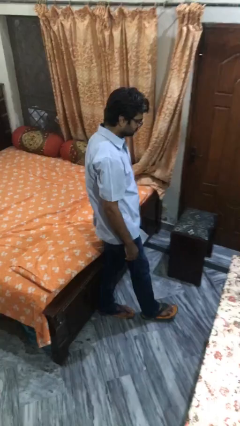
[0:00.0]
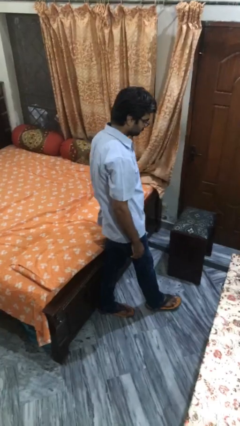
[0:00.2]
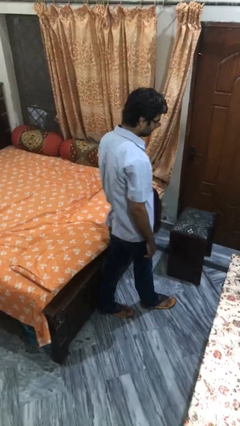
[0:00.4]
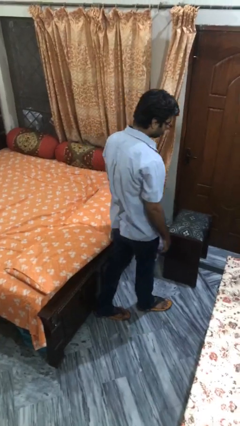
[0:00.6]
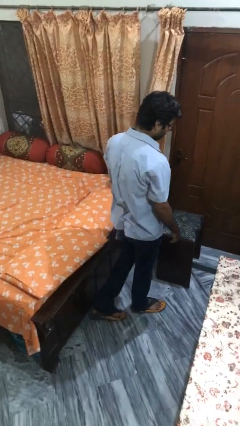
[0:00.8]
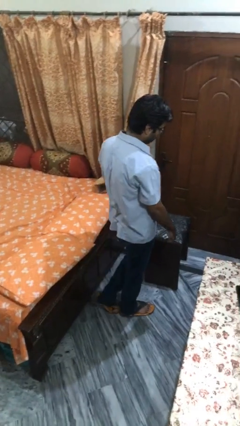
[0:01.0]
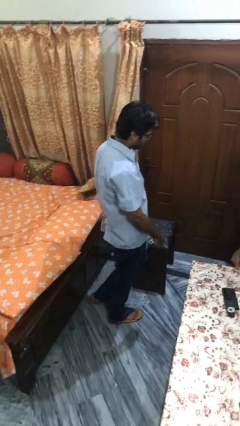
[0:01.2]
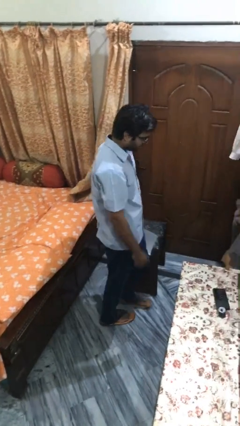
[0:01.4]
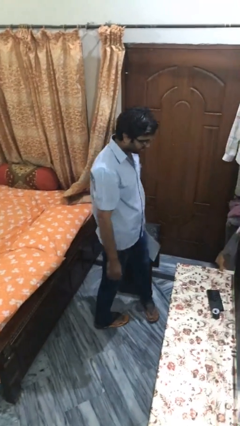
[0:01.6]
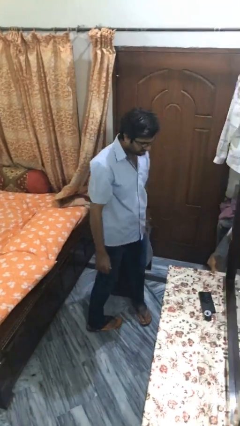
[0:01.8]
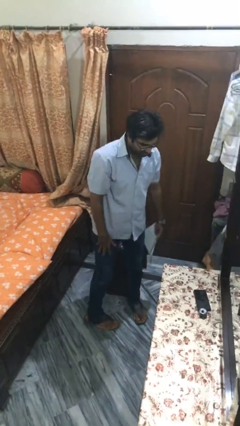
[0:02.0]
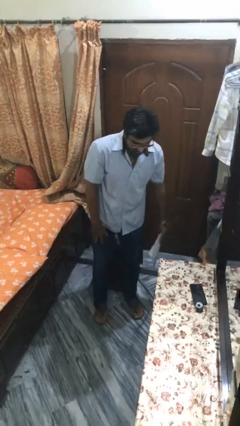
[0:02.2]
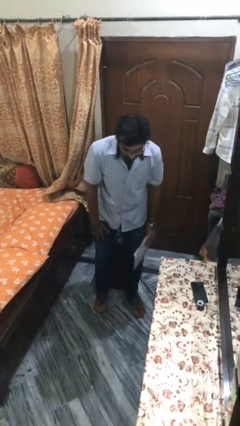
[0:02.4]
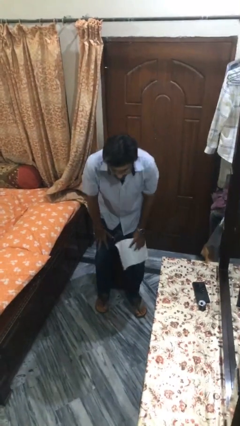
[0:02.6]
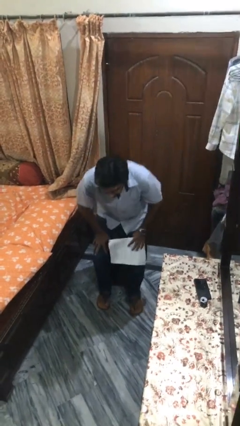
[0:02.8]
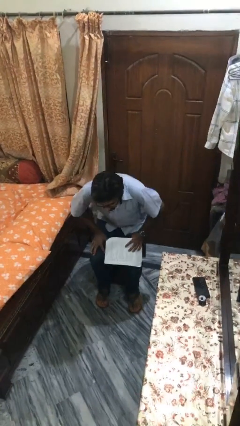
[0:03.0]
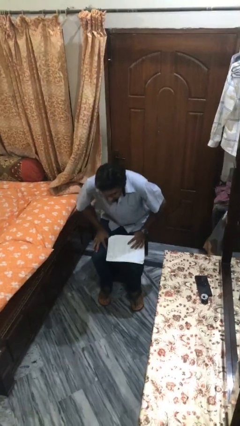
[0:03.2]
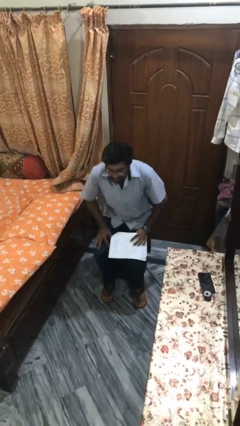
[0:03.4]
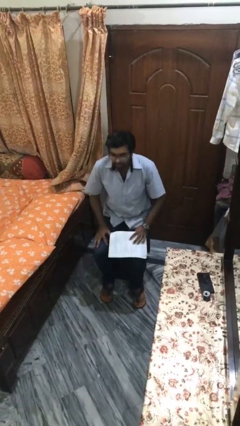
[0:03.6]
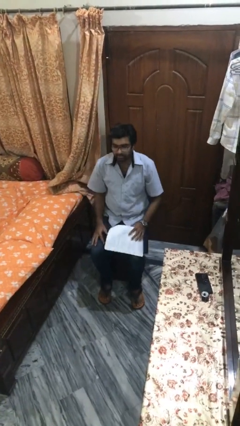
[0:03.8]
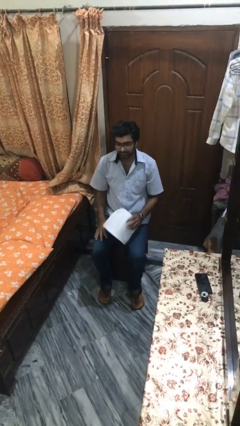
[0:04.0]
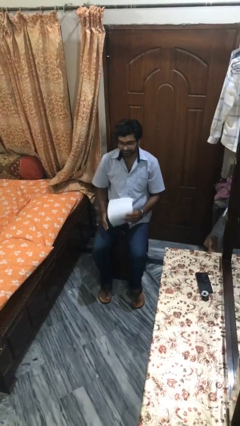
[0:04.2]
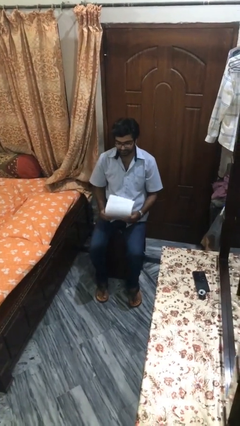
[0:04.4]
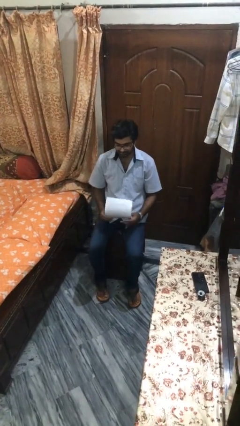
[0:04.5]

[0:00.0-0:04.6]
person sits down

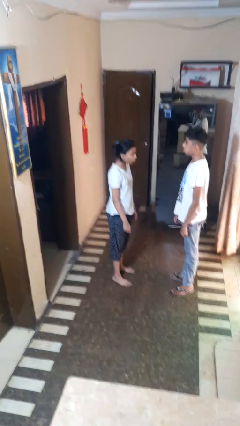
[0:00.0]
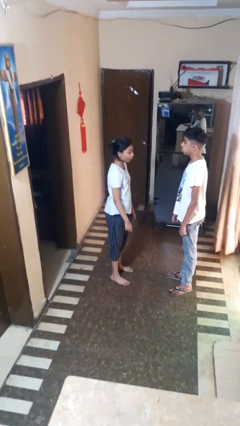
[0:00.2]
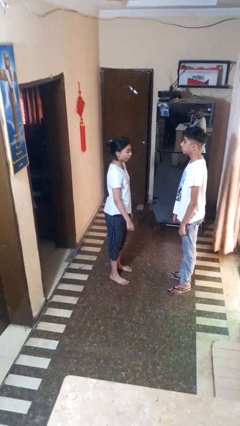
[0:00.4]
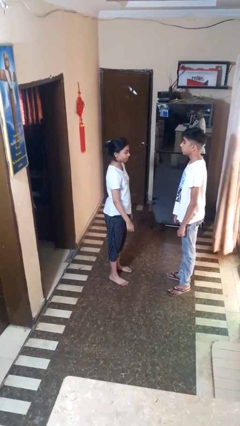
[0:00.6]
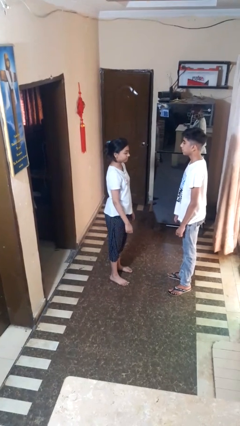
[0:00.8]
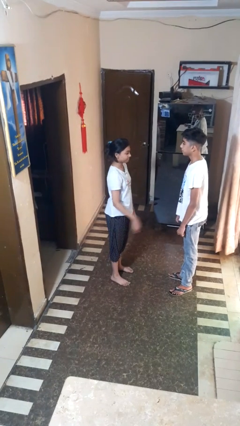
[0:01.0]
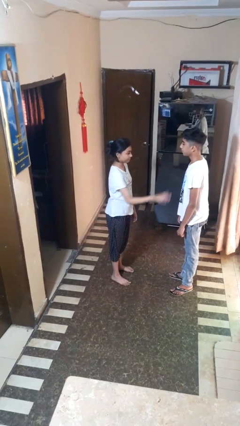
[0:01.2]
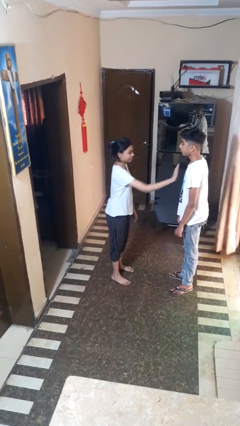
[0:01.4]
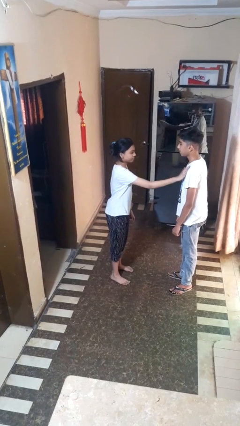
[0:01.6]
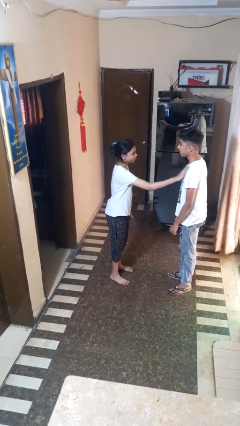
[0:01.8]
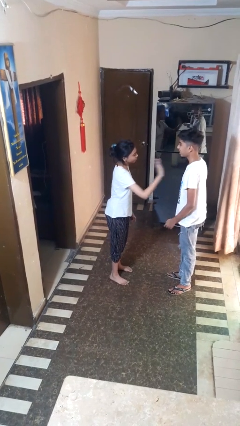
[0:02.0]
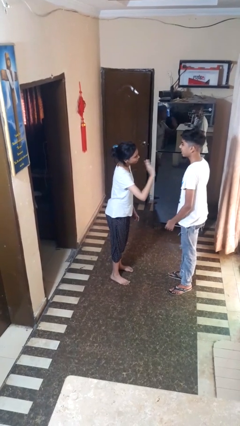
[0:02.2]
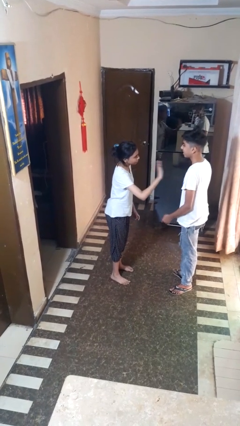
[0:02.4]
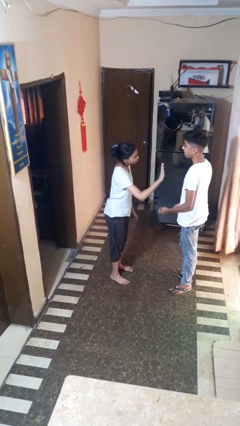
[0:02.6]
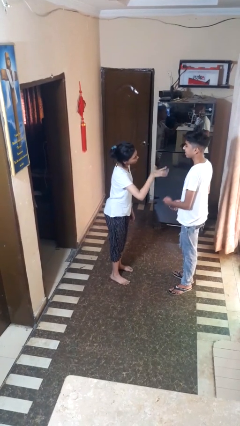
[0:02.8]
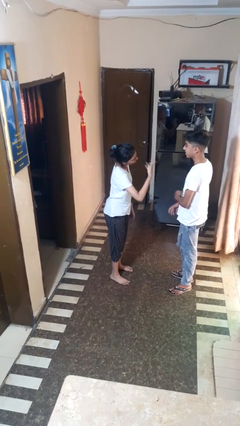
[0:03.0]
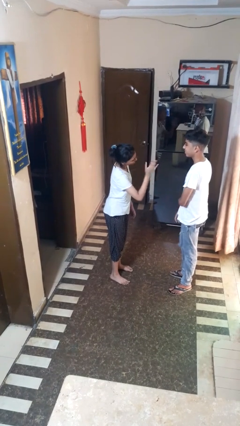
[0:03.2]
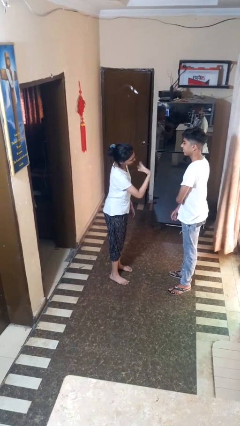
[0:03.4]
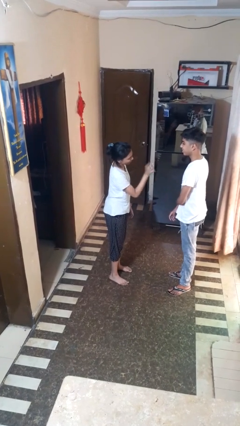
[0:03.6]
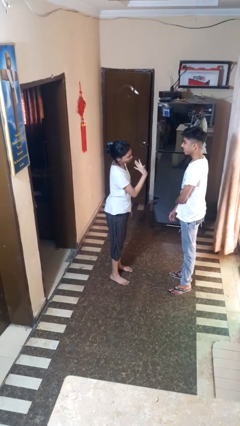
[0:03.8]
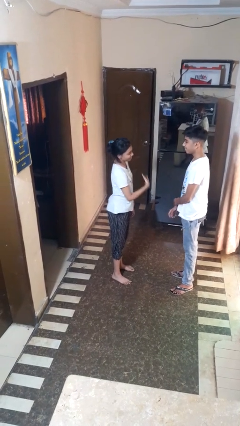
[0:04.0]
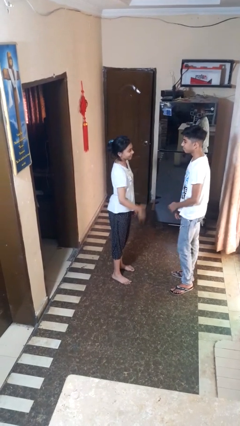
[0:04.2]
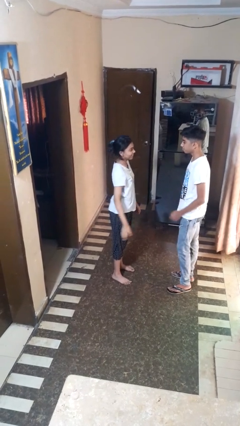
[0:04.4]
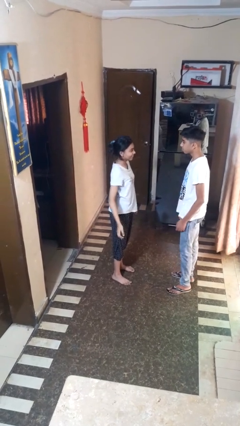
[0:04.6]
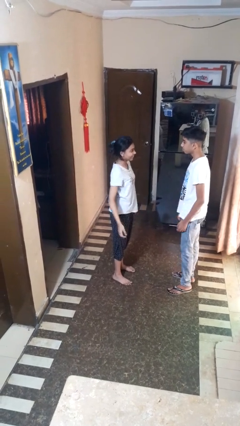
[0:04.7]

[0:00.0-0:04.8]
person shoves person

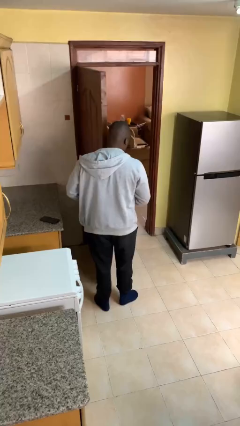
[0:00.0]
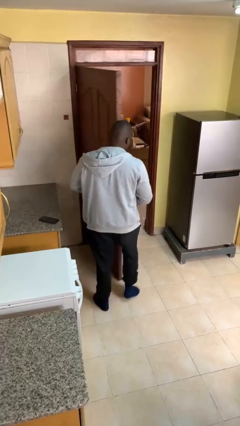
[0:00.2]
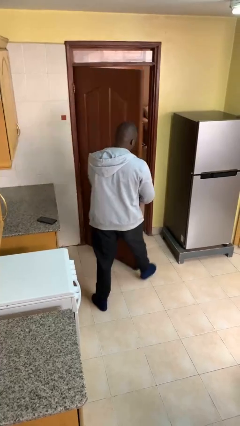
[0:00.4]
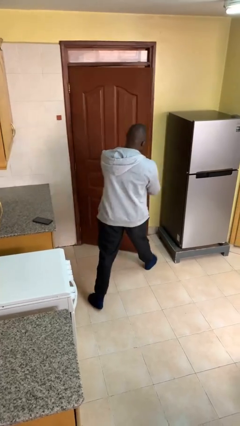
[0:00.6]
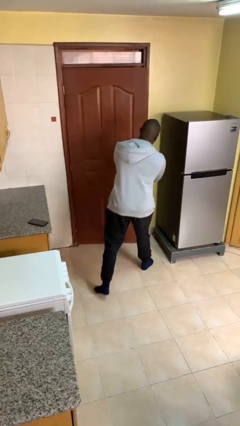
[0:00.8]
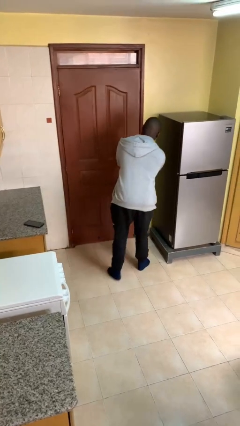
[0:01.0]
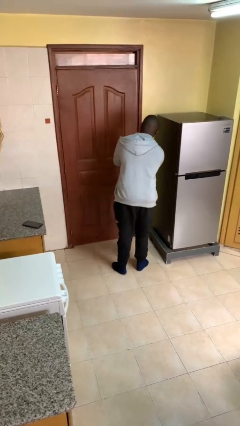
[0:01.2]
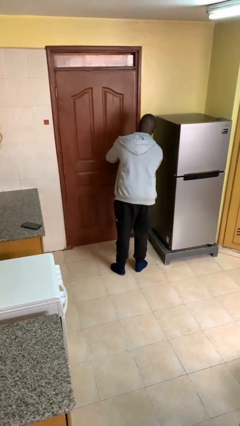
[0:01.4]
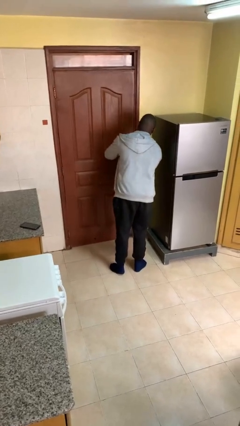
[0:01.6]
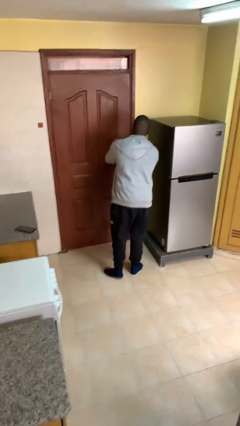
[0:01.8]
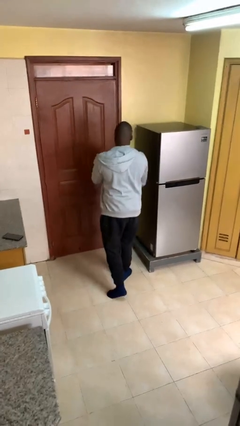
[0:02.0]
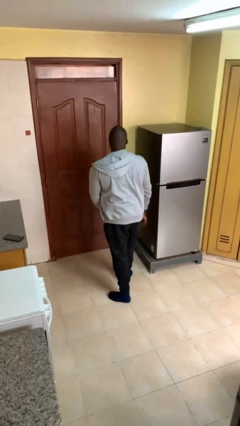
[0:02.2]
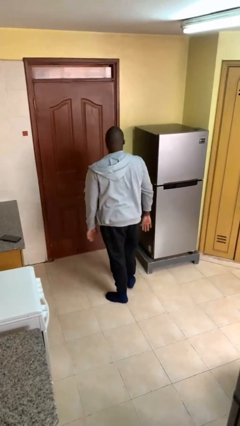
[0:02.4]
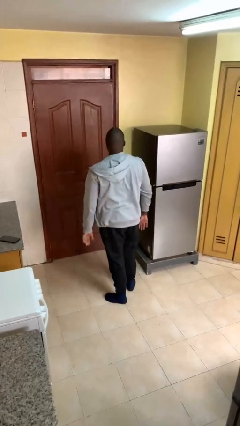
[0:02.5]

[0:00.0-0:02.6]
person closes facility door

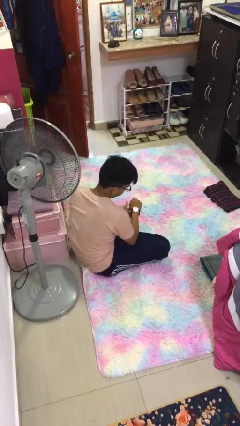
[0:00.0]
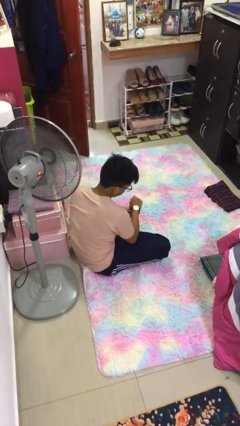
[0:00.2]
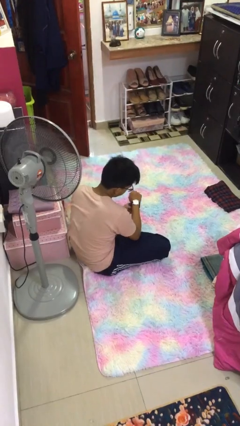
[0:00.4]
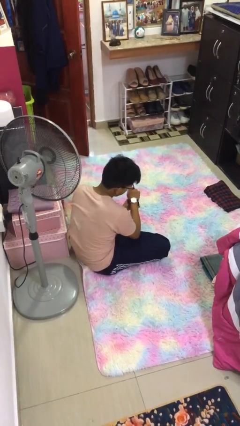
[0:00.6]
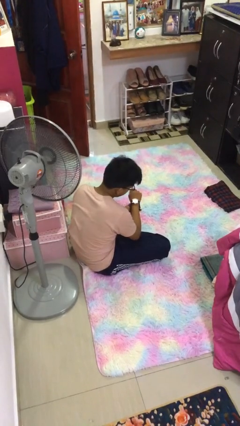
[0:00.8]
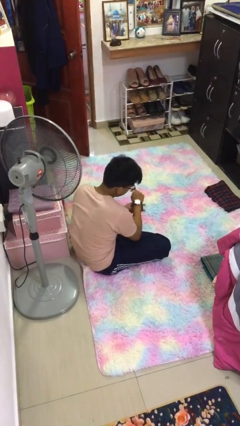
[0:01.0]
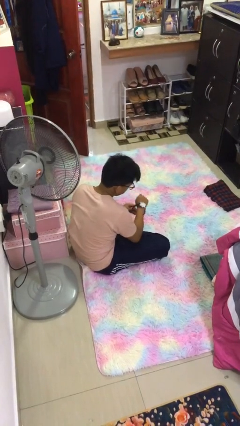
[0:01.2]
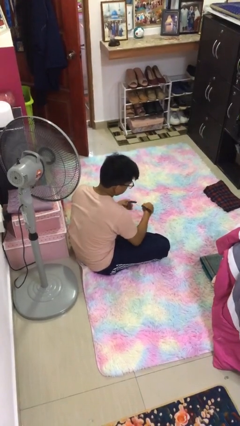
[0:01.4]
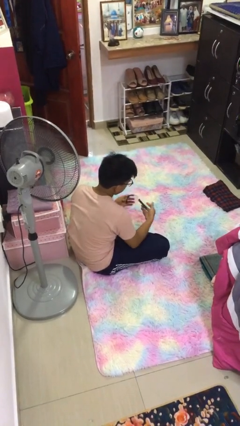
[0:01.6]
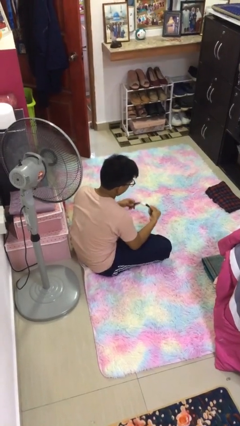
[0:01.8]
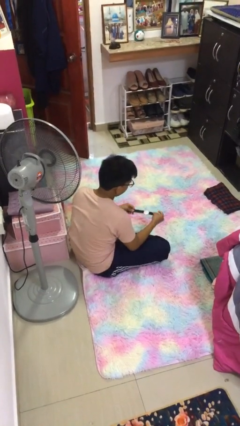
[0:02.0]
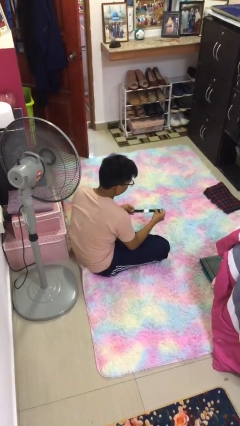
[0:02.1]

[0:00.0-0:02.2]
person takes off wristwatch

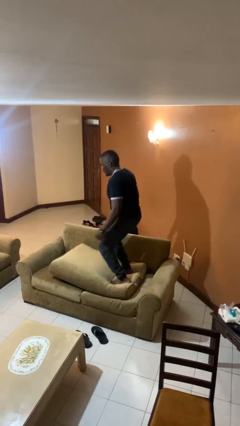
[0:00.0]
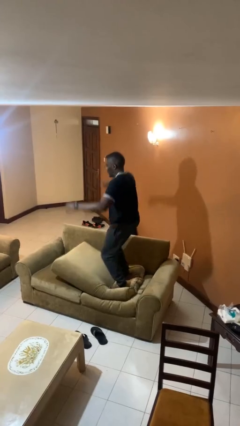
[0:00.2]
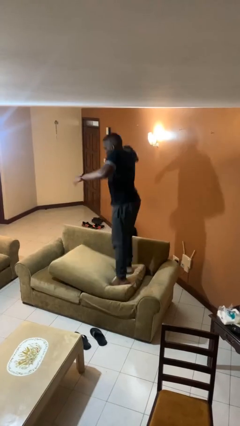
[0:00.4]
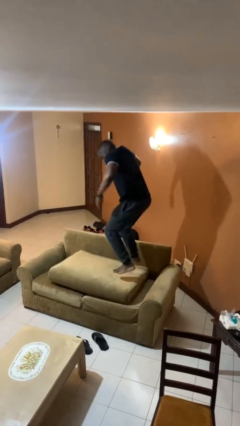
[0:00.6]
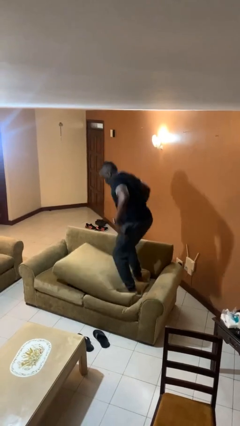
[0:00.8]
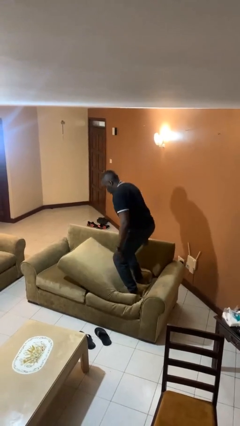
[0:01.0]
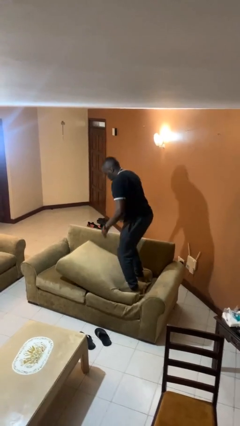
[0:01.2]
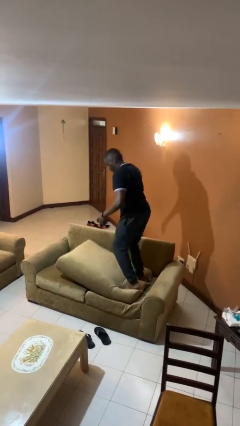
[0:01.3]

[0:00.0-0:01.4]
person jumps on couch

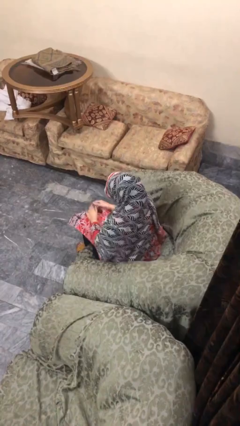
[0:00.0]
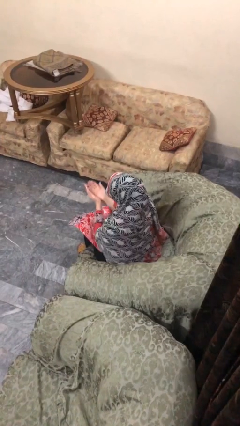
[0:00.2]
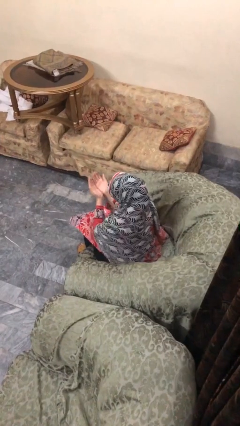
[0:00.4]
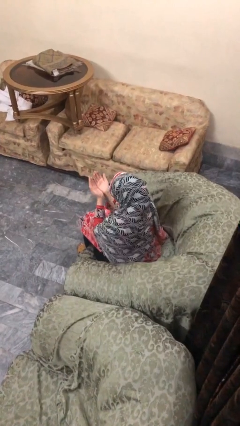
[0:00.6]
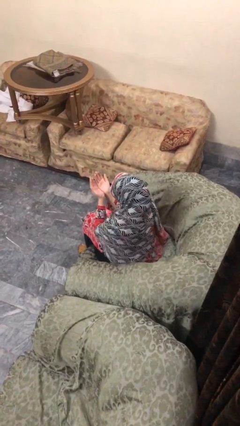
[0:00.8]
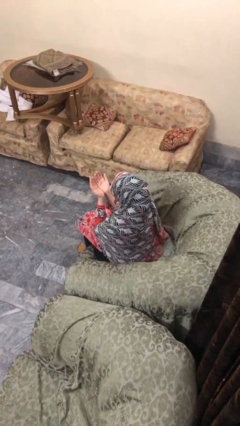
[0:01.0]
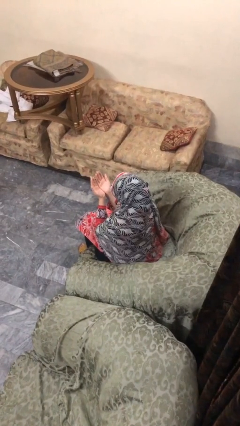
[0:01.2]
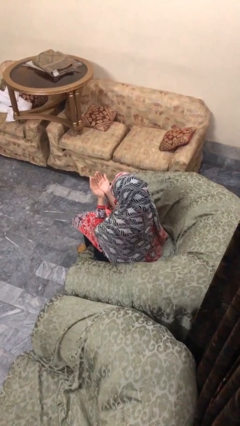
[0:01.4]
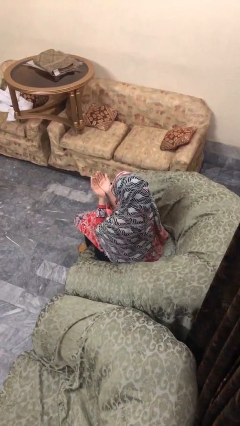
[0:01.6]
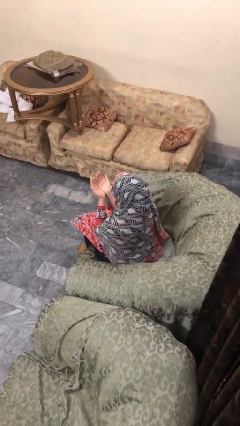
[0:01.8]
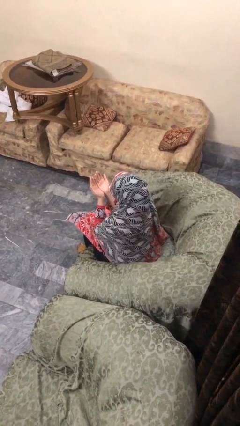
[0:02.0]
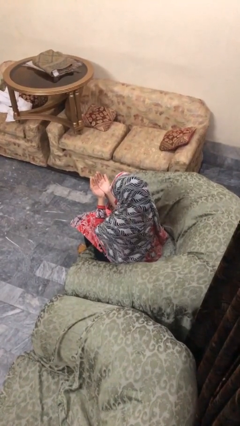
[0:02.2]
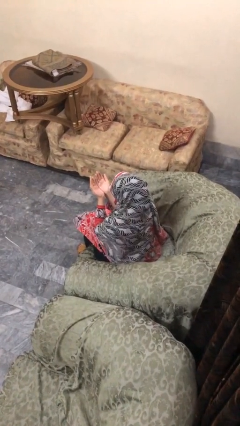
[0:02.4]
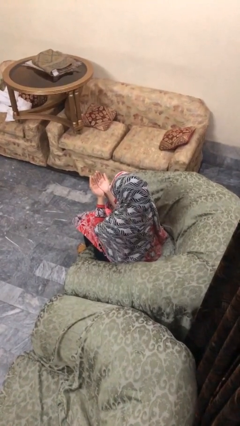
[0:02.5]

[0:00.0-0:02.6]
person prays
